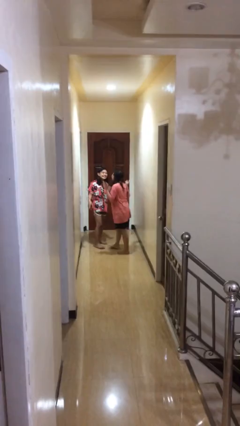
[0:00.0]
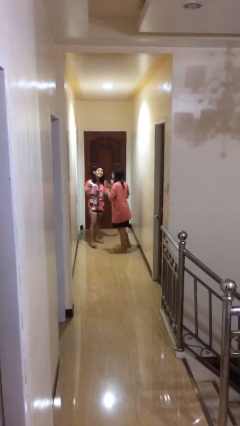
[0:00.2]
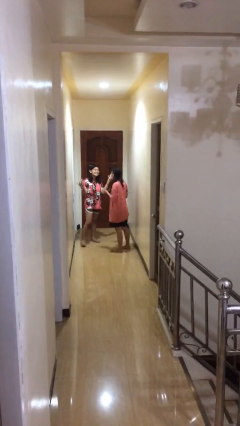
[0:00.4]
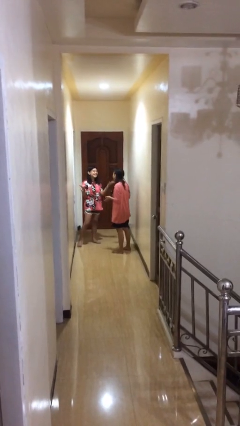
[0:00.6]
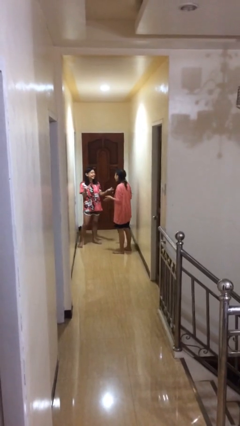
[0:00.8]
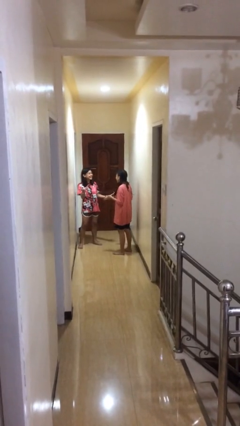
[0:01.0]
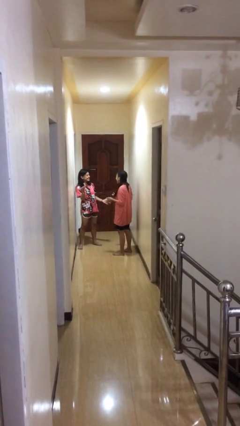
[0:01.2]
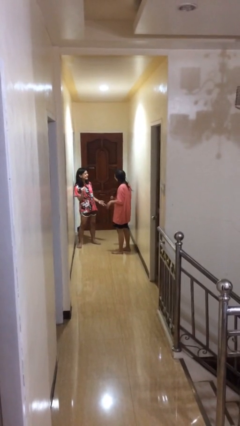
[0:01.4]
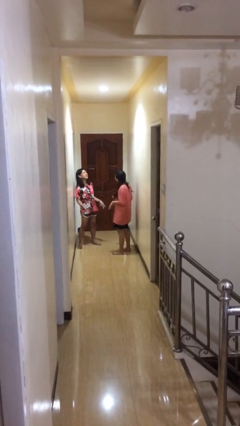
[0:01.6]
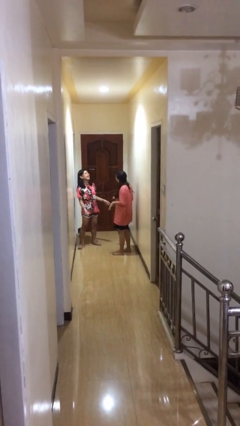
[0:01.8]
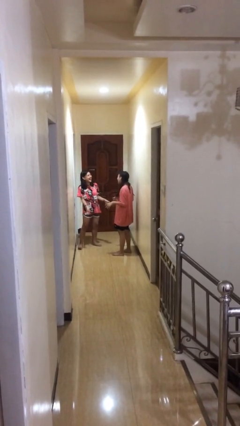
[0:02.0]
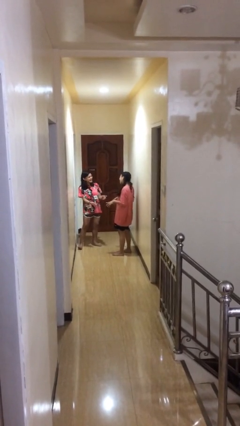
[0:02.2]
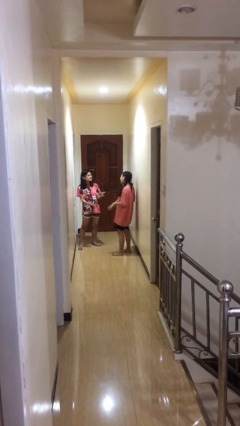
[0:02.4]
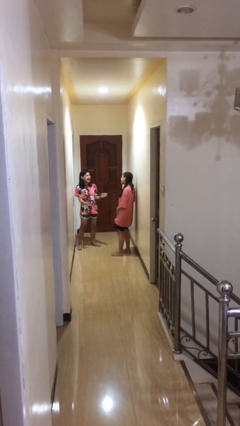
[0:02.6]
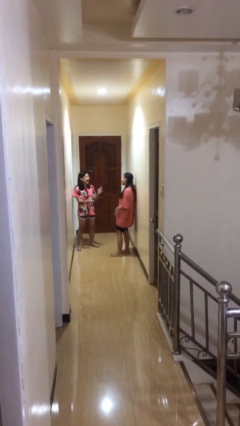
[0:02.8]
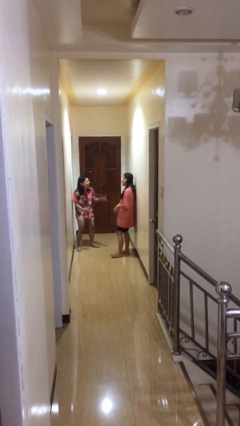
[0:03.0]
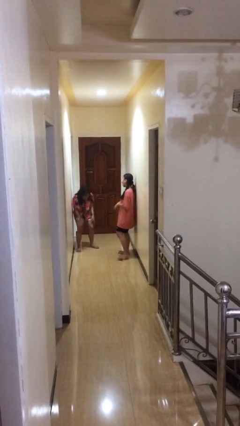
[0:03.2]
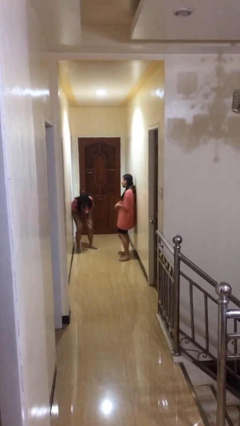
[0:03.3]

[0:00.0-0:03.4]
person talks to person

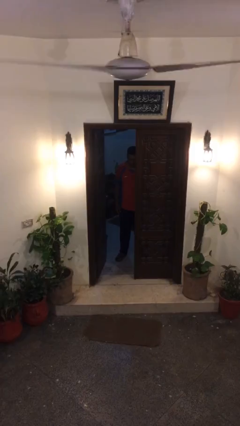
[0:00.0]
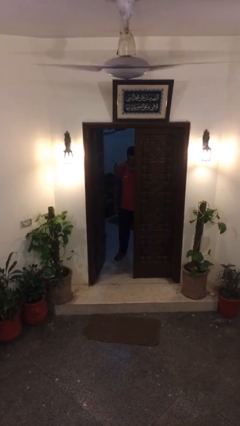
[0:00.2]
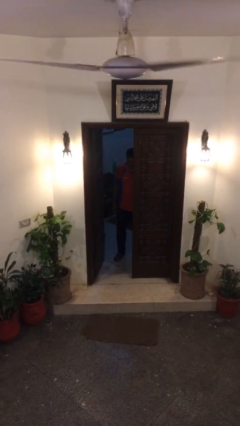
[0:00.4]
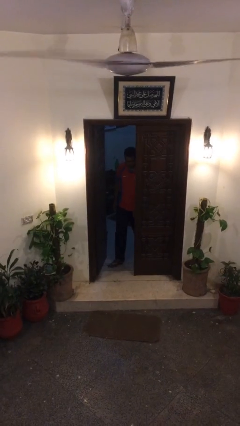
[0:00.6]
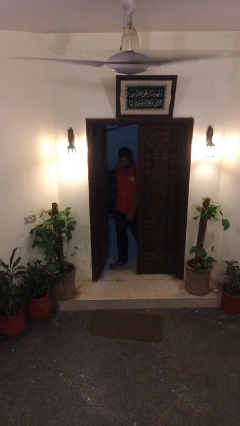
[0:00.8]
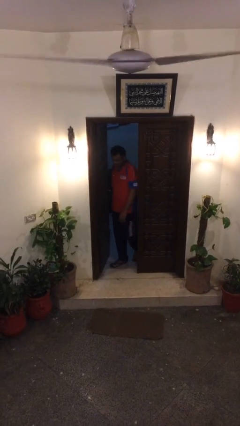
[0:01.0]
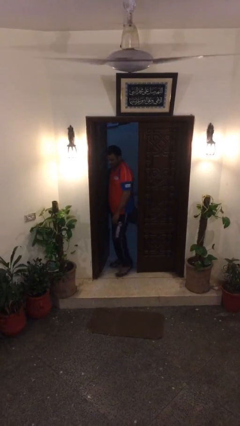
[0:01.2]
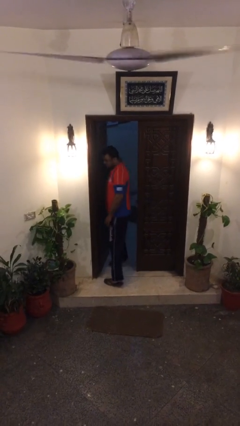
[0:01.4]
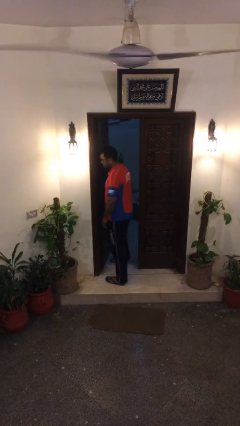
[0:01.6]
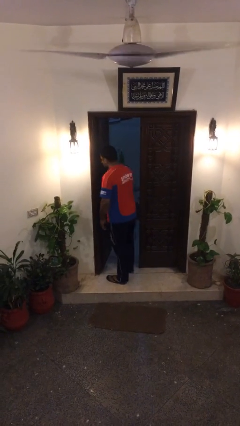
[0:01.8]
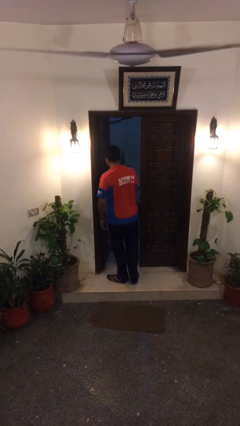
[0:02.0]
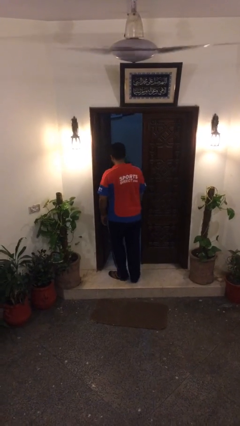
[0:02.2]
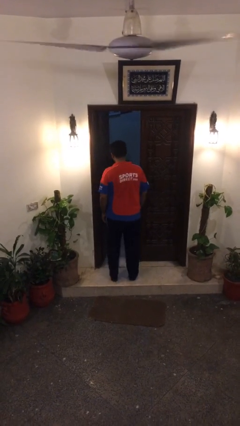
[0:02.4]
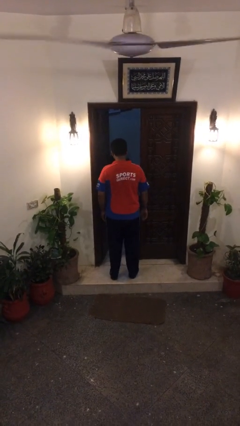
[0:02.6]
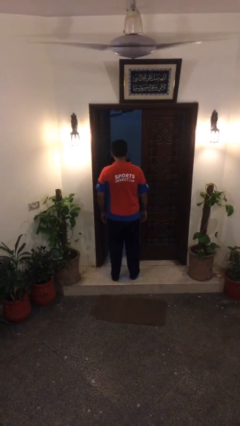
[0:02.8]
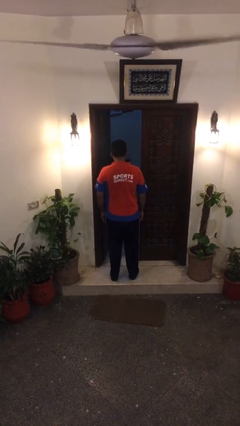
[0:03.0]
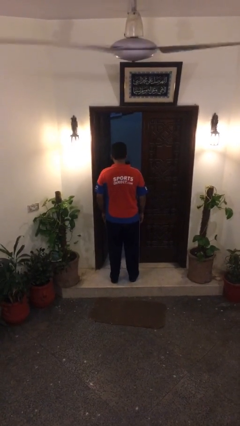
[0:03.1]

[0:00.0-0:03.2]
person enters scene through structure

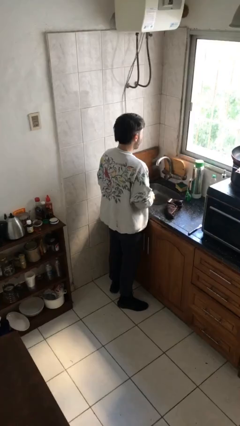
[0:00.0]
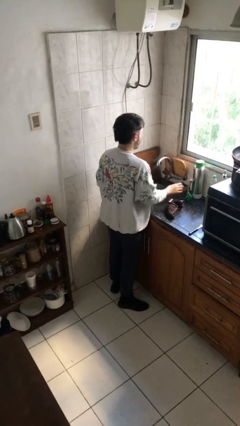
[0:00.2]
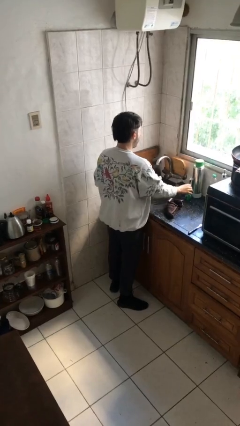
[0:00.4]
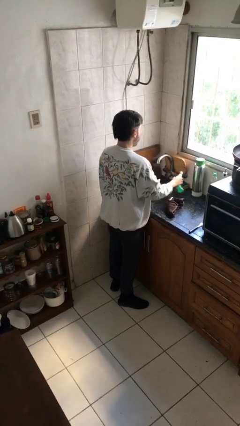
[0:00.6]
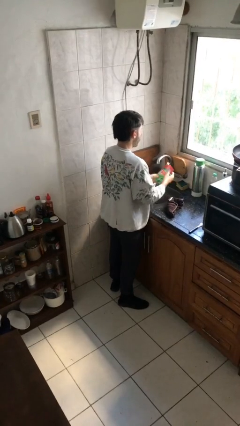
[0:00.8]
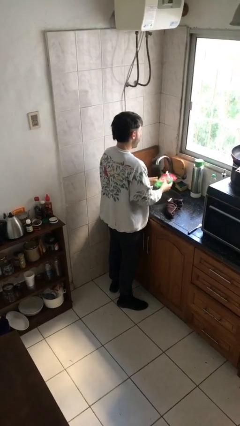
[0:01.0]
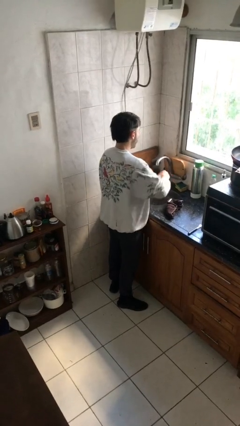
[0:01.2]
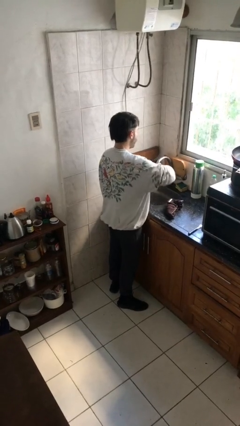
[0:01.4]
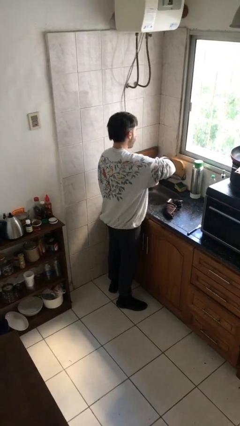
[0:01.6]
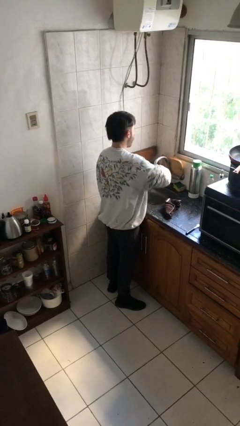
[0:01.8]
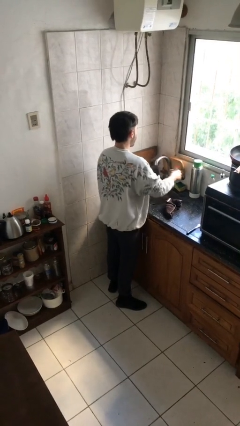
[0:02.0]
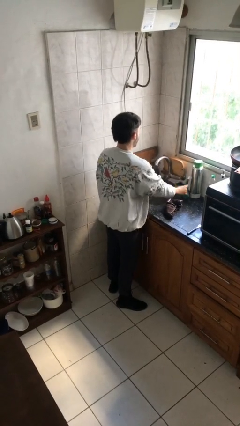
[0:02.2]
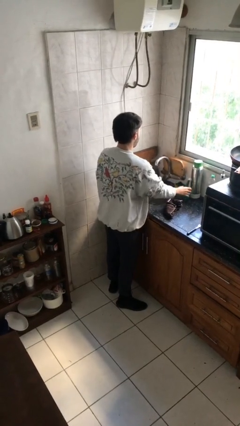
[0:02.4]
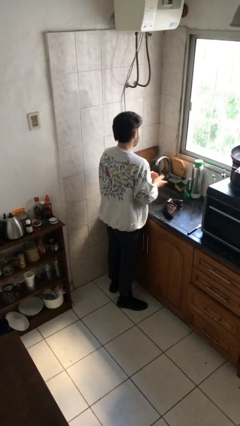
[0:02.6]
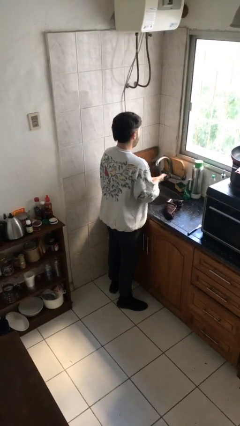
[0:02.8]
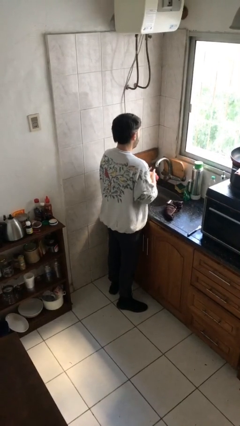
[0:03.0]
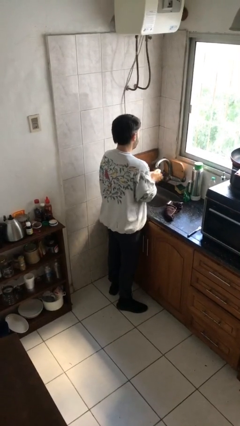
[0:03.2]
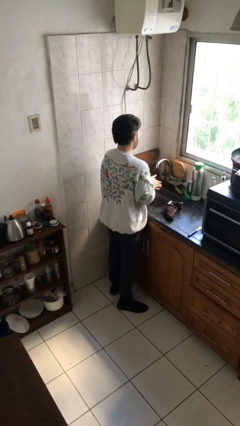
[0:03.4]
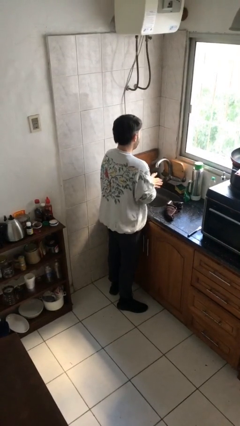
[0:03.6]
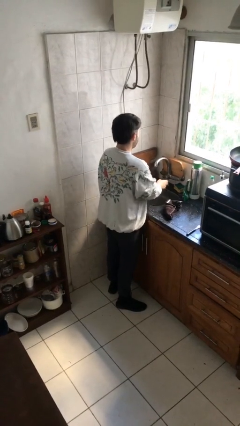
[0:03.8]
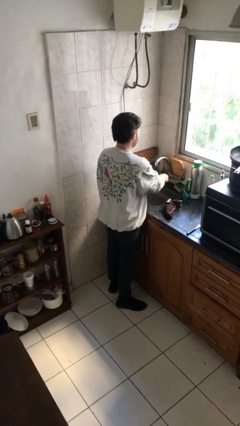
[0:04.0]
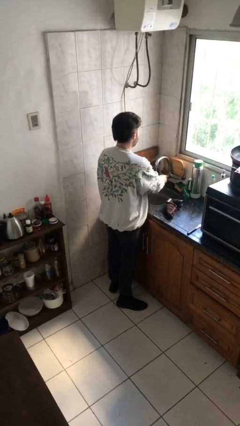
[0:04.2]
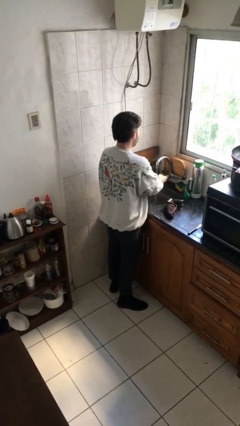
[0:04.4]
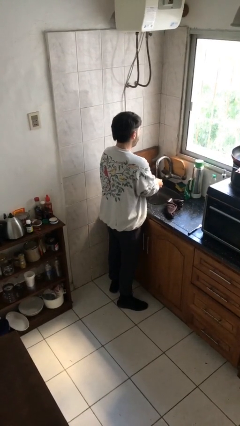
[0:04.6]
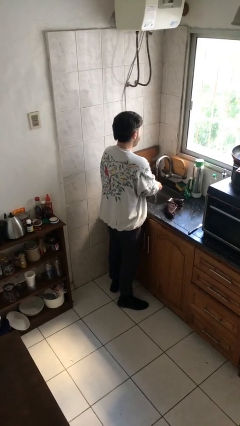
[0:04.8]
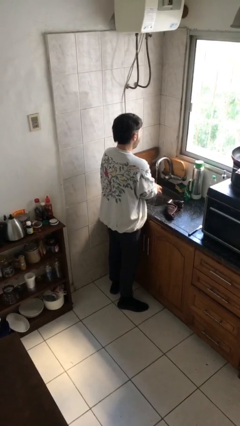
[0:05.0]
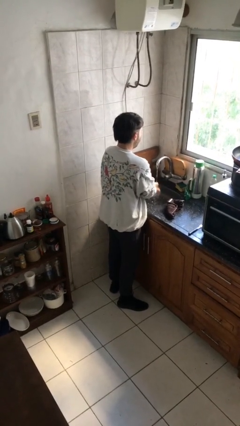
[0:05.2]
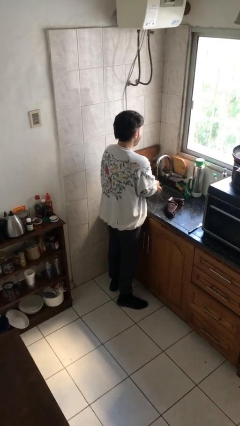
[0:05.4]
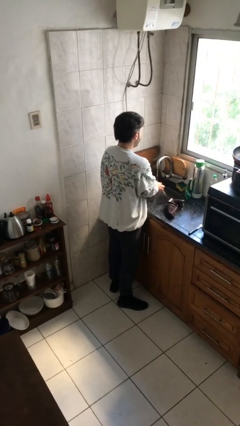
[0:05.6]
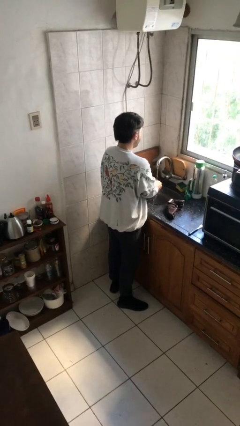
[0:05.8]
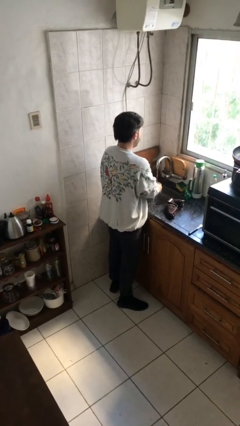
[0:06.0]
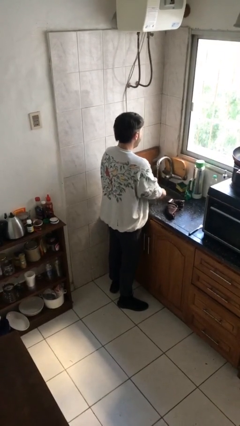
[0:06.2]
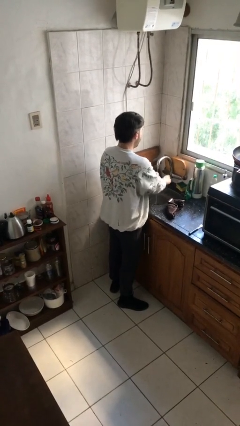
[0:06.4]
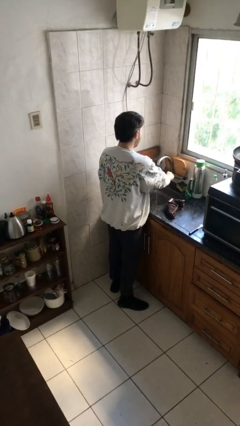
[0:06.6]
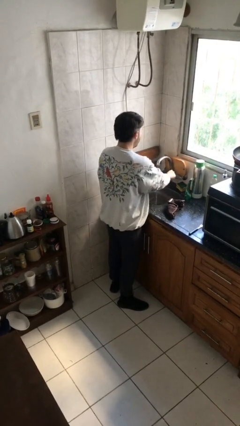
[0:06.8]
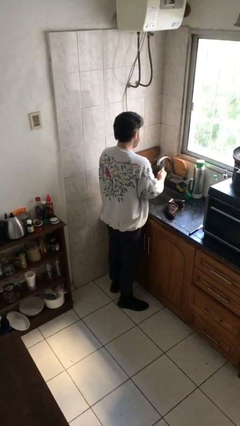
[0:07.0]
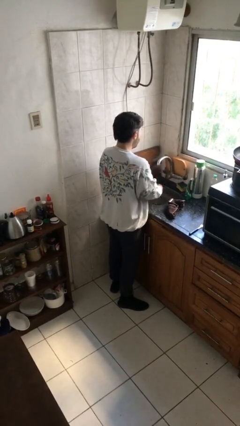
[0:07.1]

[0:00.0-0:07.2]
person washes hands

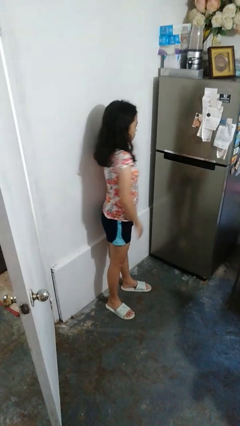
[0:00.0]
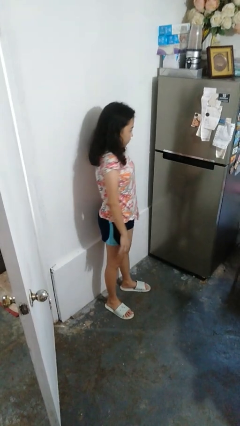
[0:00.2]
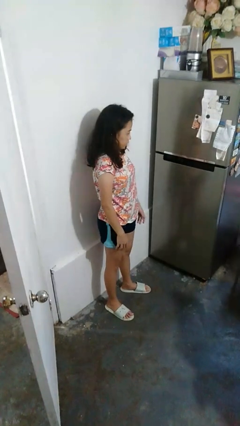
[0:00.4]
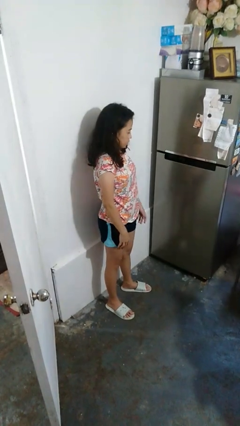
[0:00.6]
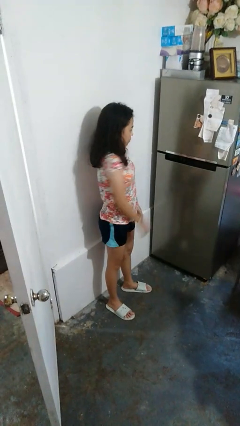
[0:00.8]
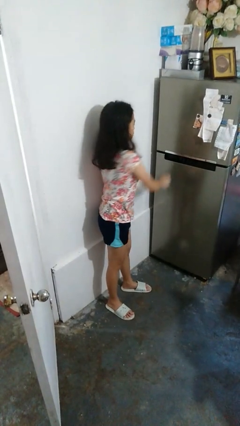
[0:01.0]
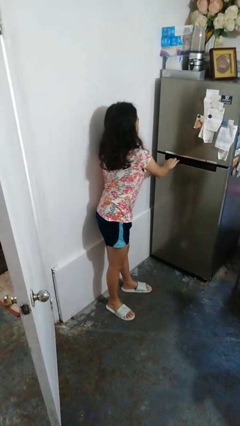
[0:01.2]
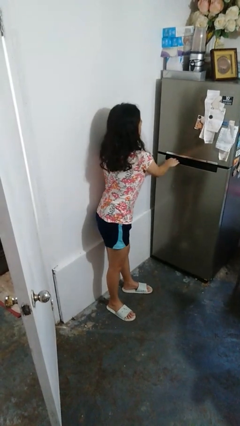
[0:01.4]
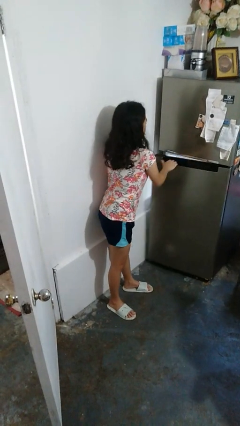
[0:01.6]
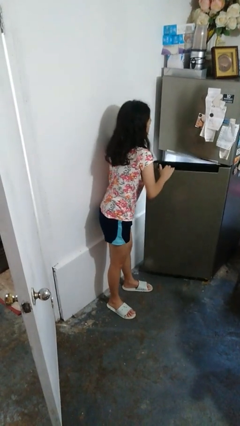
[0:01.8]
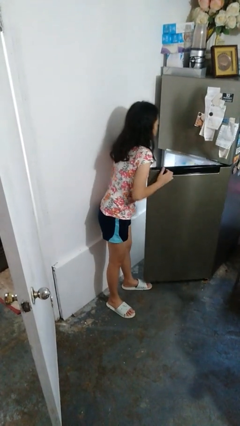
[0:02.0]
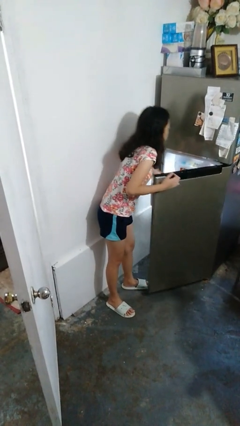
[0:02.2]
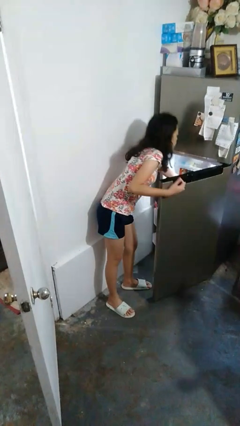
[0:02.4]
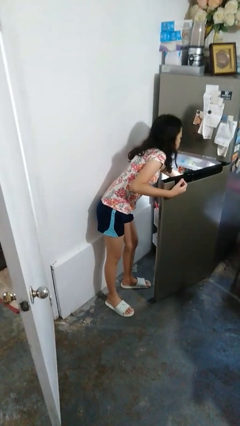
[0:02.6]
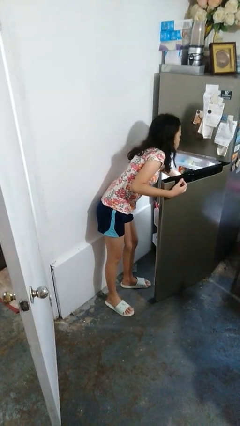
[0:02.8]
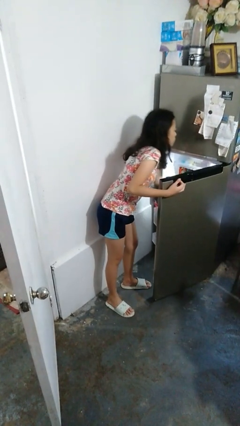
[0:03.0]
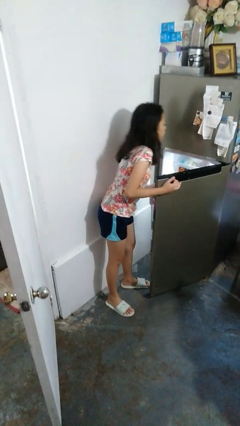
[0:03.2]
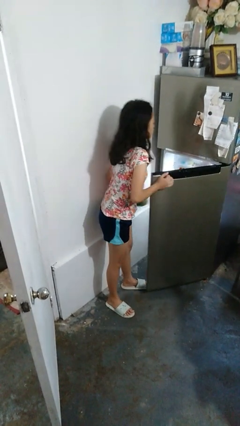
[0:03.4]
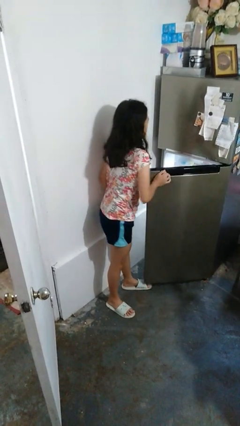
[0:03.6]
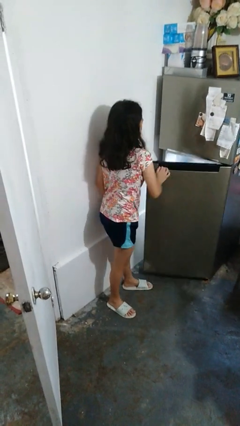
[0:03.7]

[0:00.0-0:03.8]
person takes object from refrigerator
